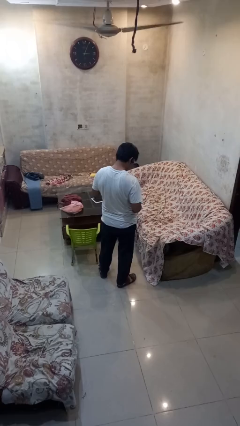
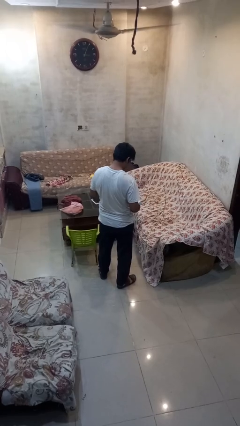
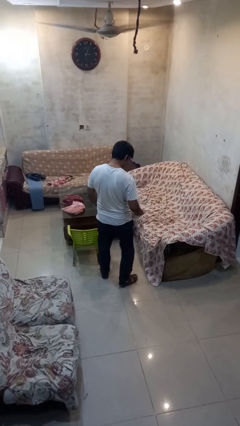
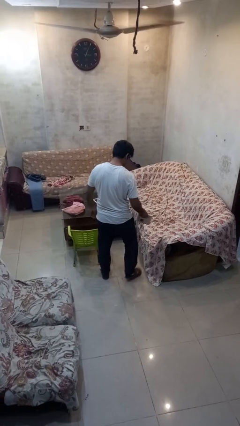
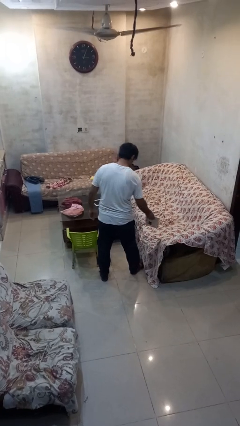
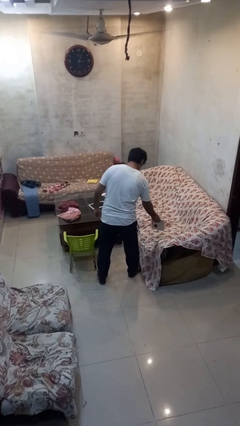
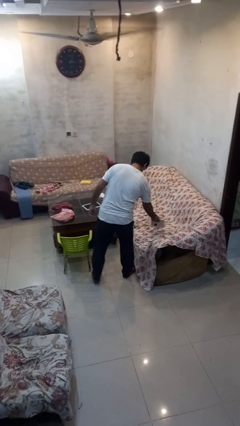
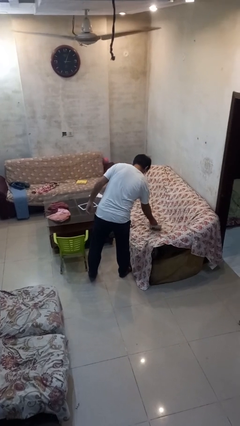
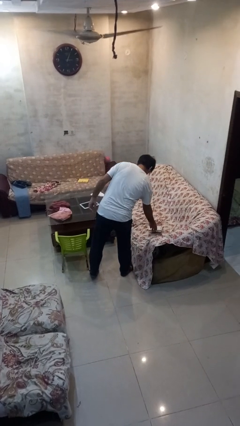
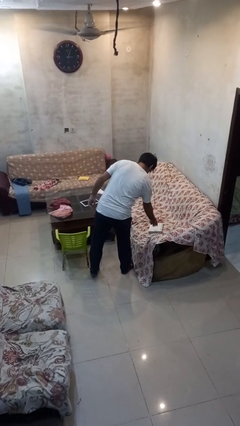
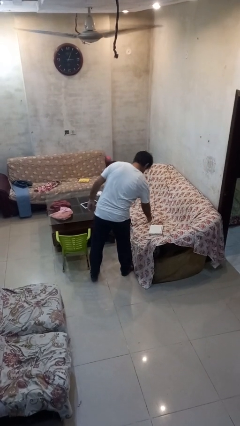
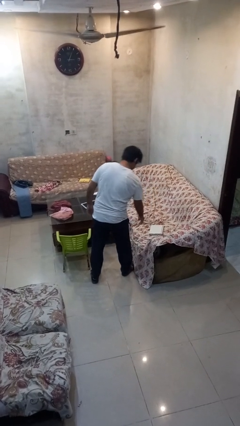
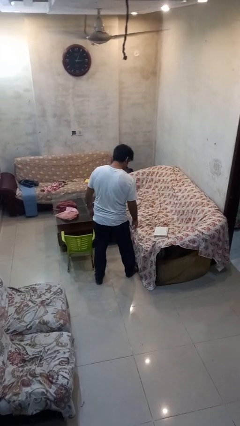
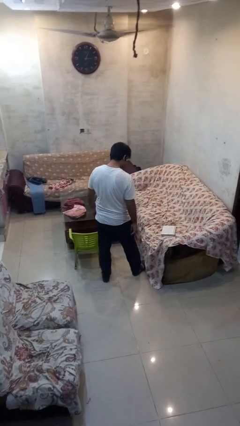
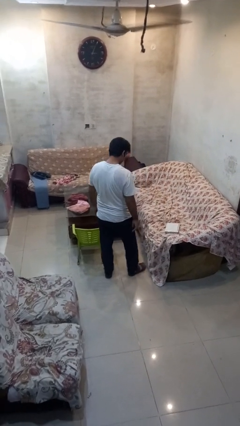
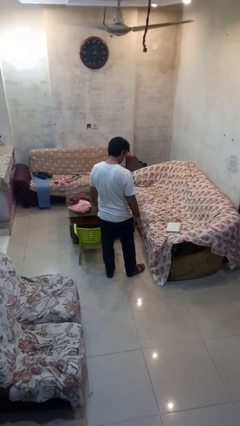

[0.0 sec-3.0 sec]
person puts down object on couch

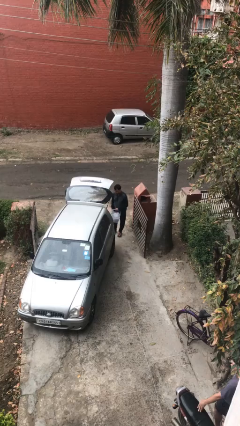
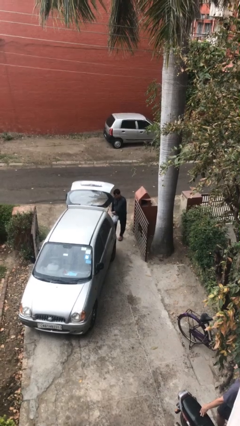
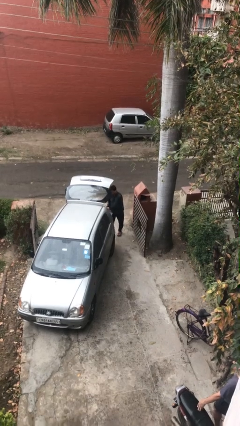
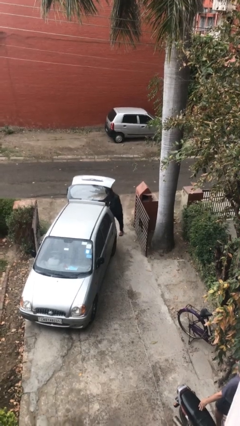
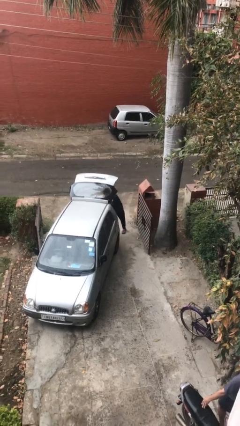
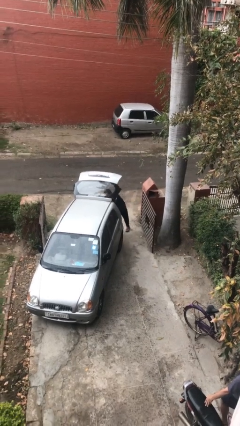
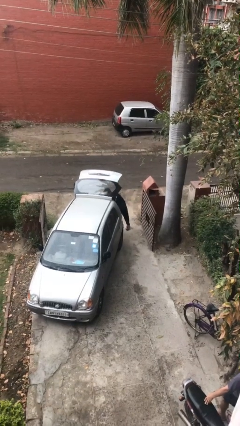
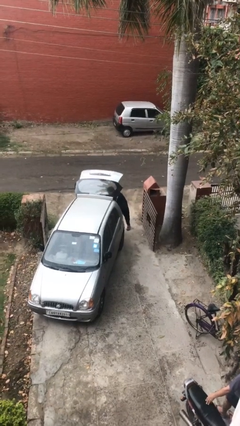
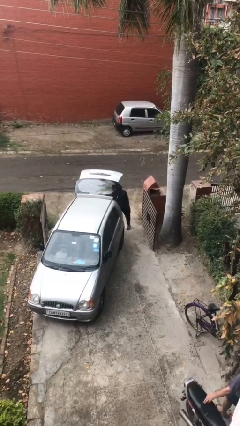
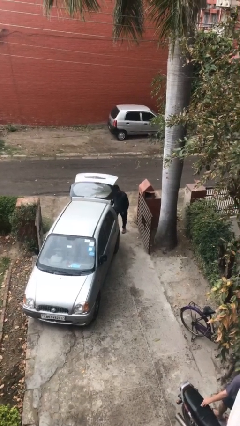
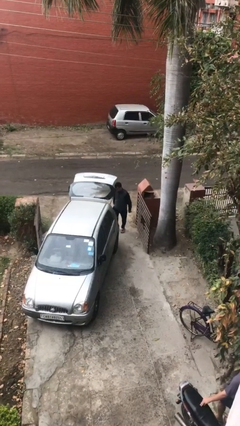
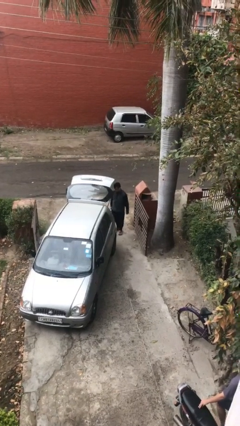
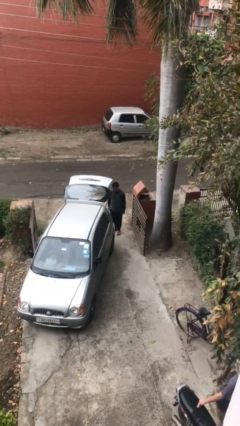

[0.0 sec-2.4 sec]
person loads car

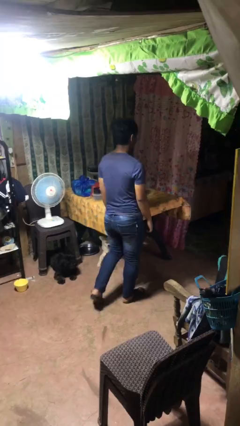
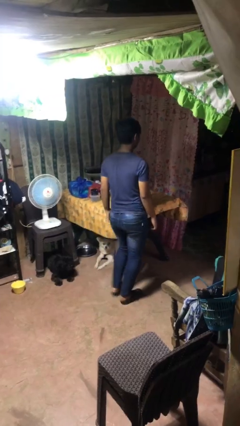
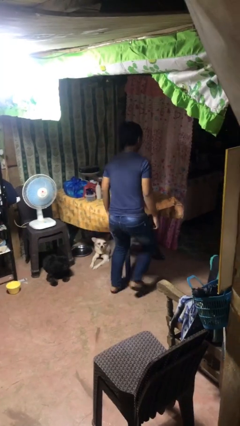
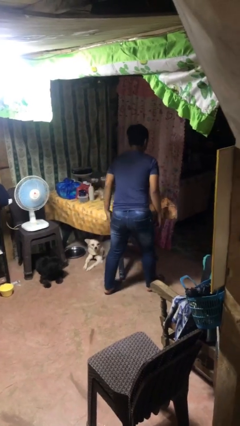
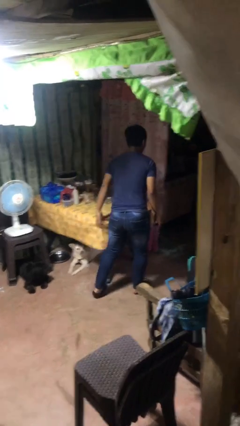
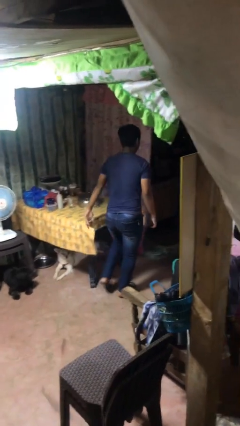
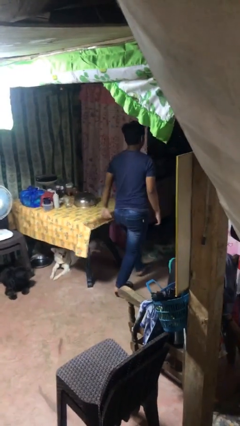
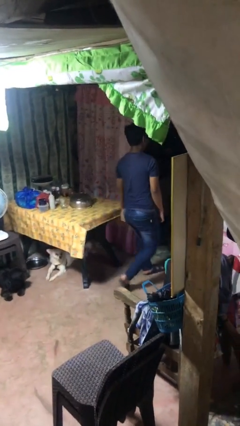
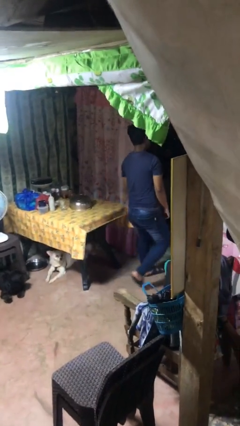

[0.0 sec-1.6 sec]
person bumps into table

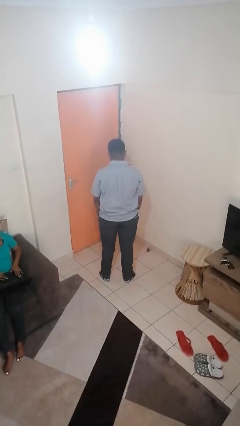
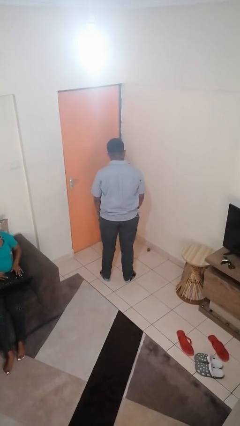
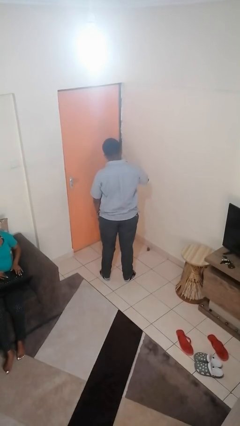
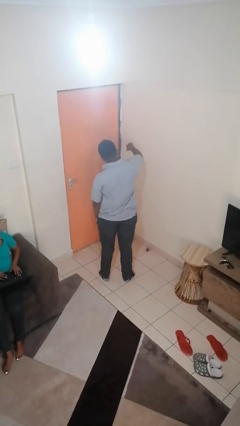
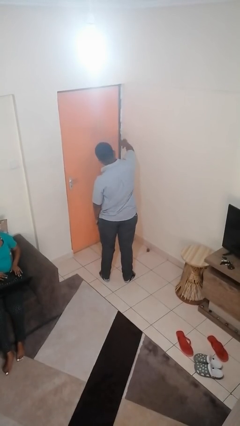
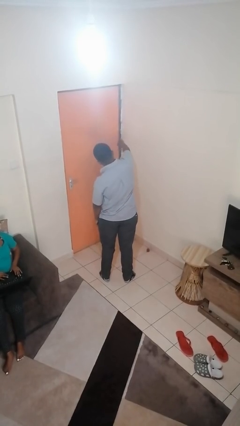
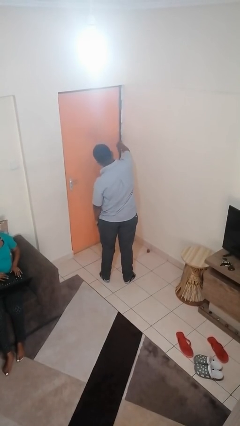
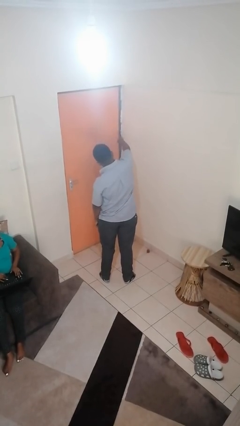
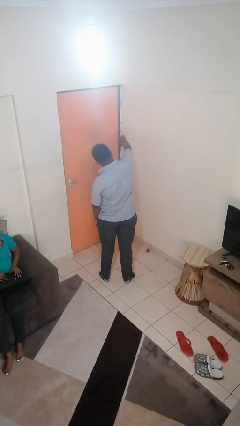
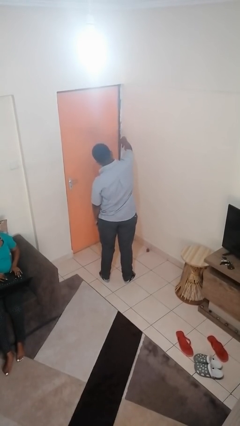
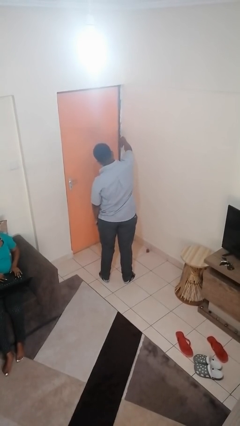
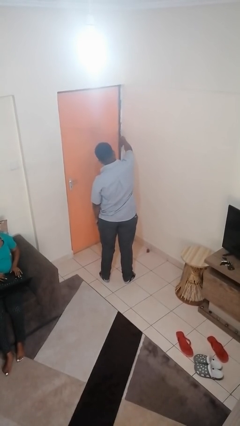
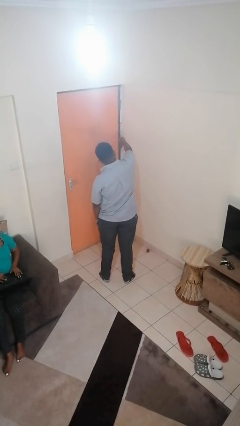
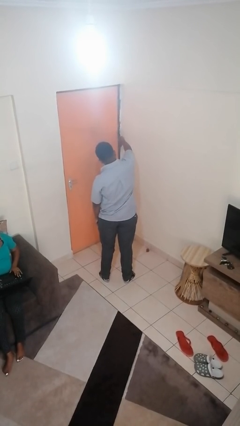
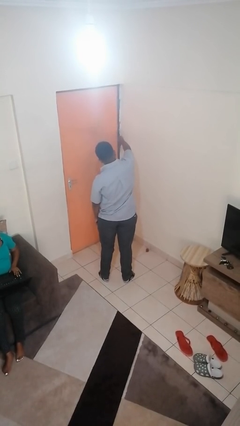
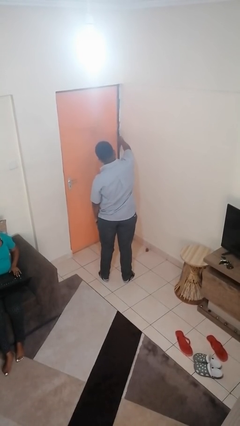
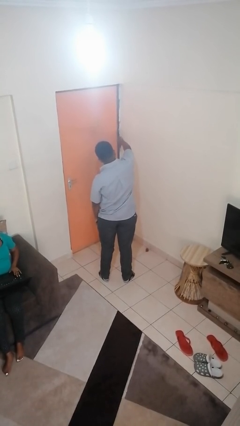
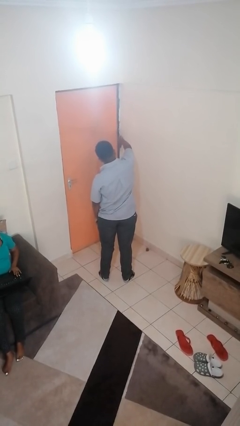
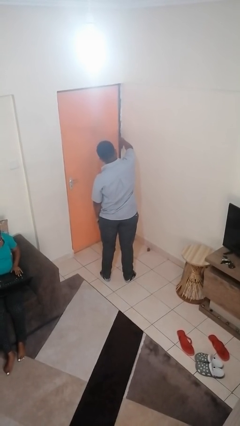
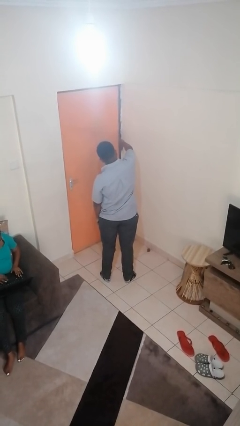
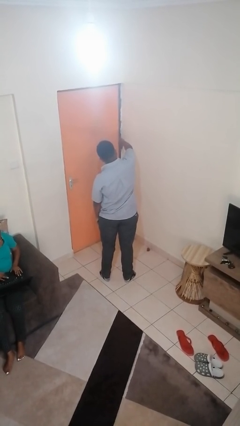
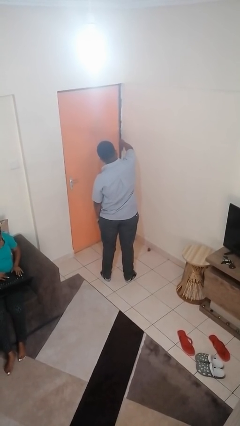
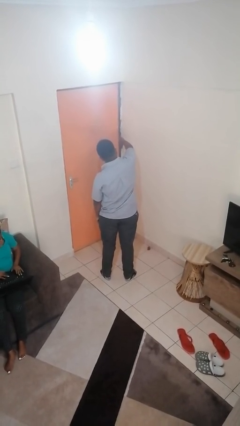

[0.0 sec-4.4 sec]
person gestures thumbs down

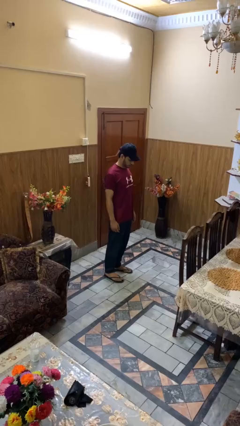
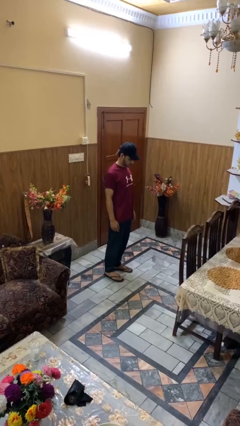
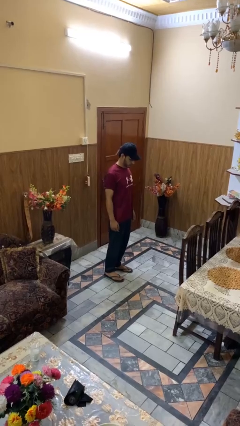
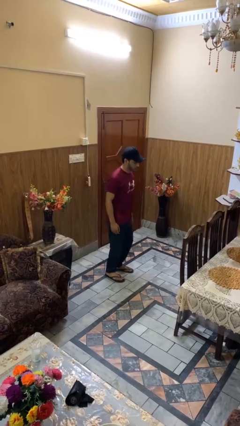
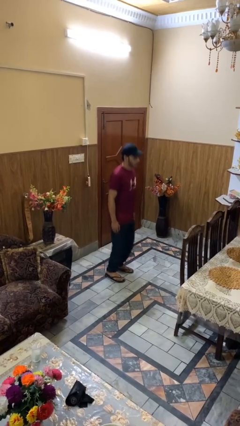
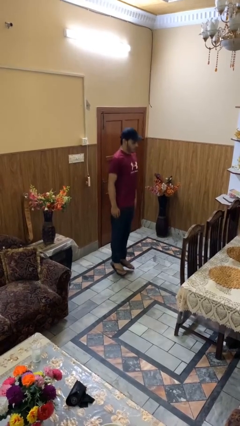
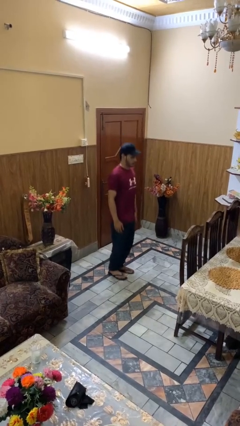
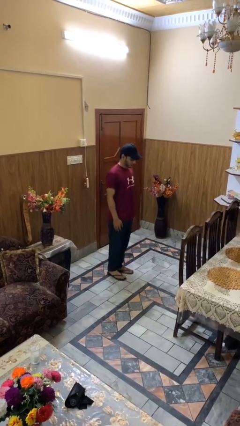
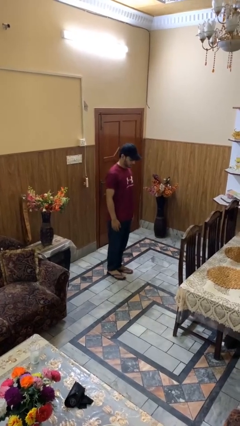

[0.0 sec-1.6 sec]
person jumps

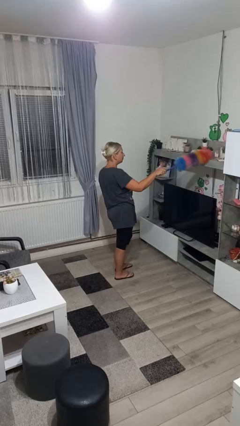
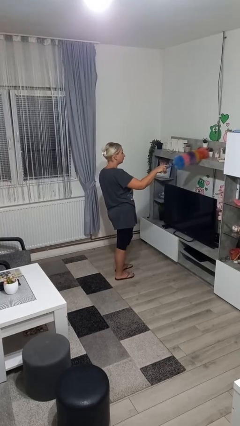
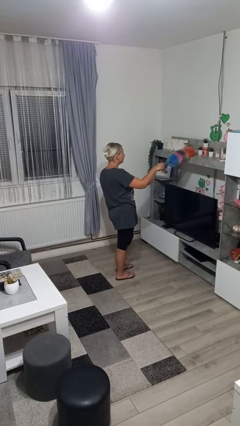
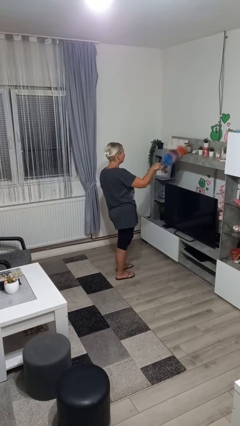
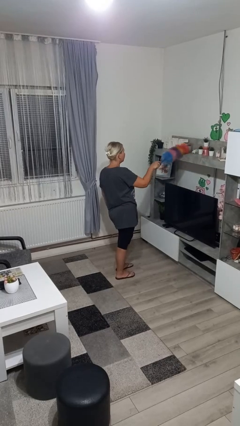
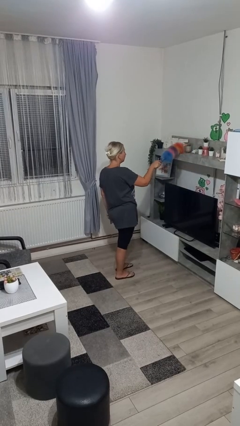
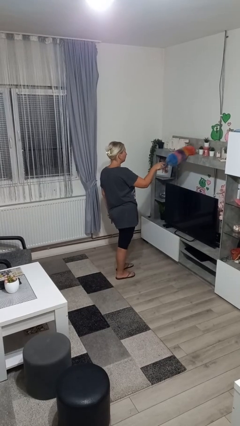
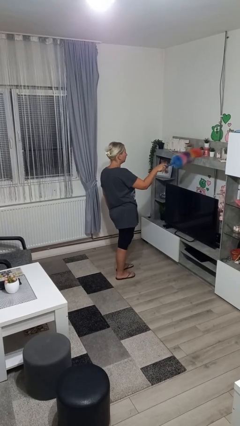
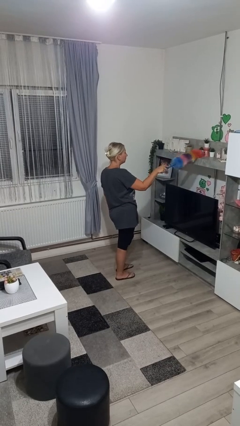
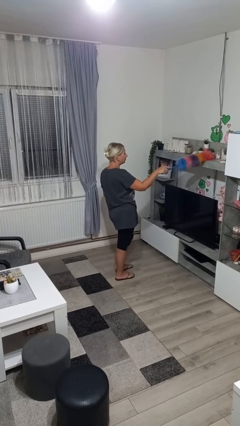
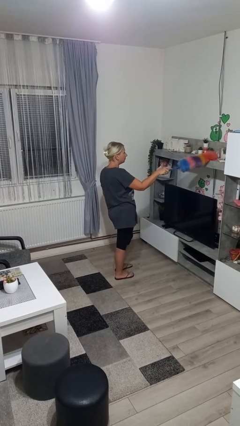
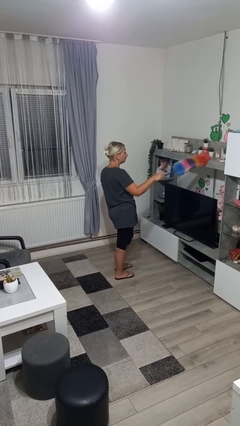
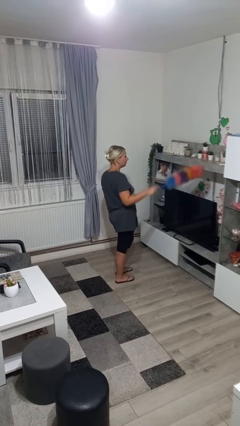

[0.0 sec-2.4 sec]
person dusts furniture

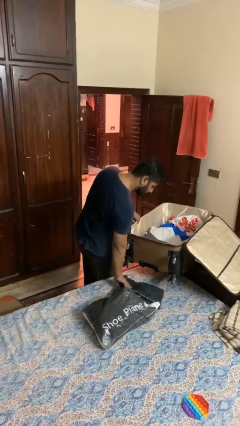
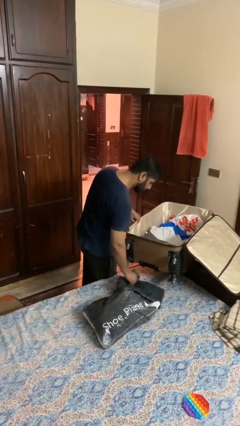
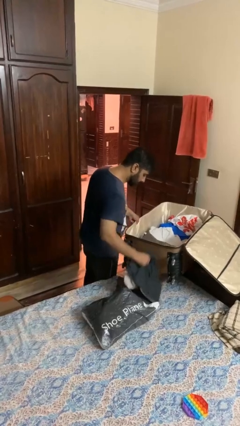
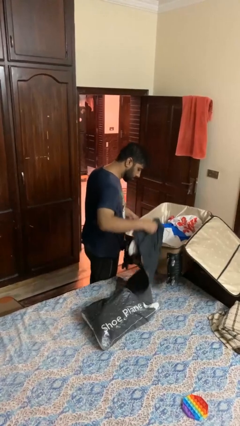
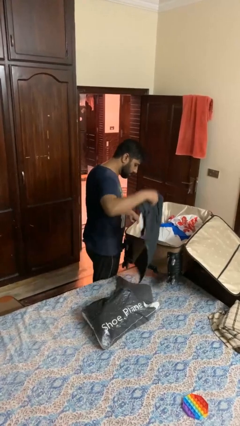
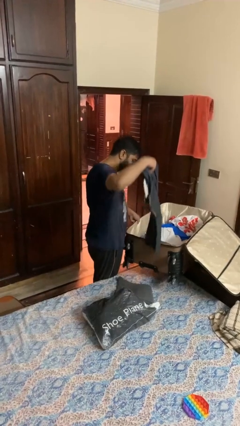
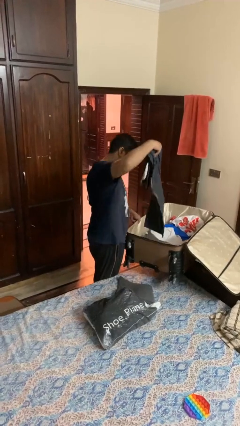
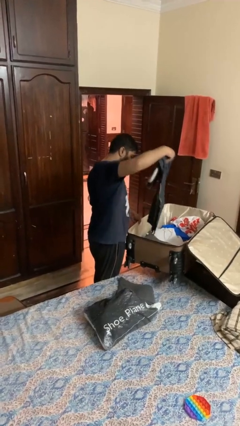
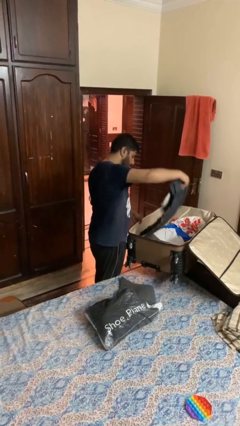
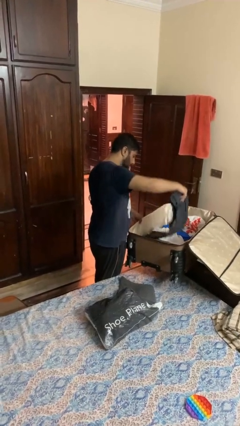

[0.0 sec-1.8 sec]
person loads clothes into suitcase
